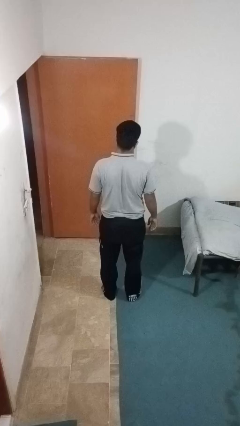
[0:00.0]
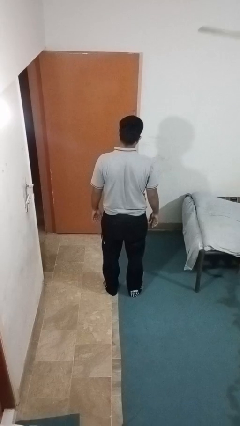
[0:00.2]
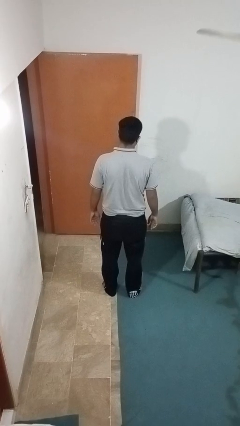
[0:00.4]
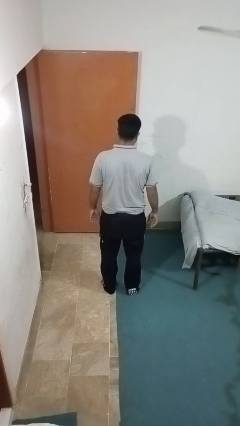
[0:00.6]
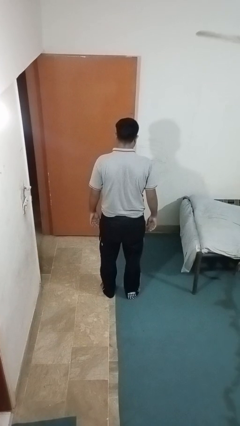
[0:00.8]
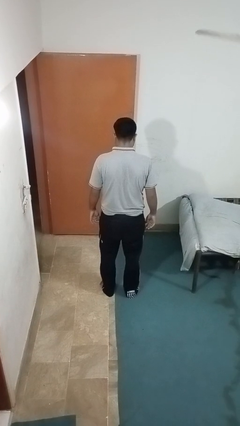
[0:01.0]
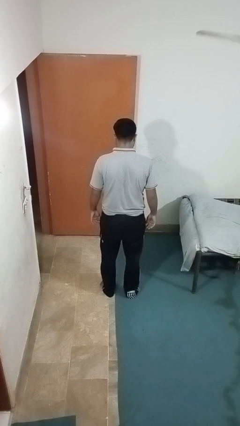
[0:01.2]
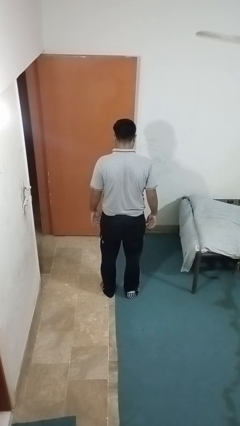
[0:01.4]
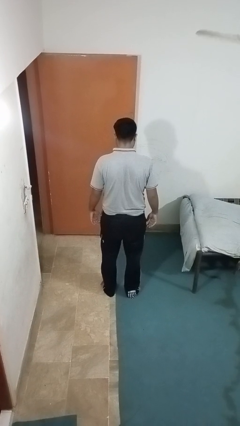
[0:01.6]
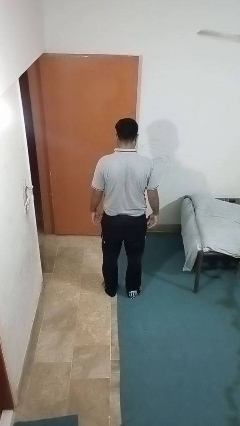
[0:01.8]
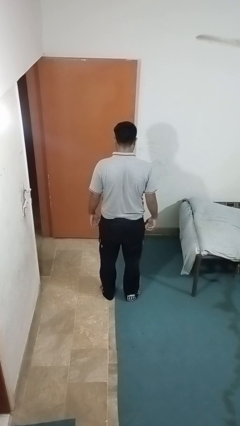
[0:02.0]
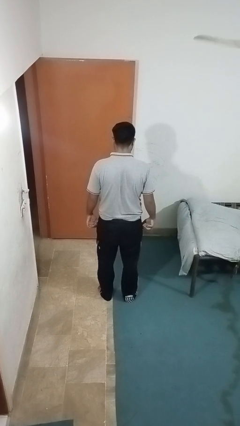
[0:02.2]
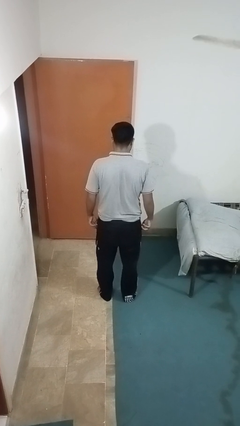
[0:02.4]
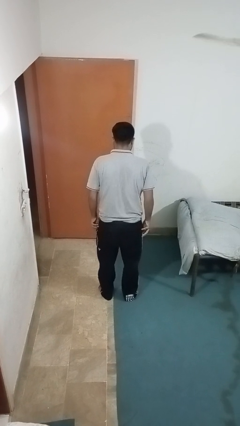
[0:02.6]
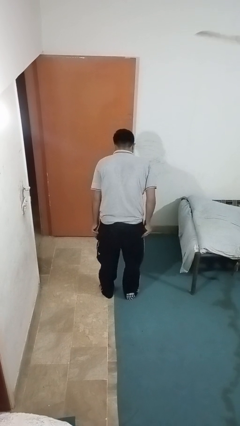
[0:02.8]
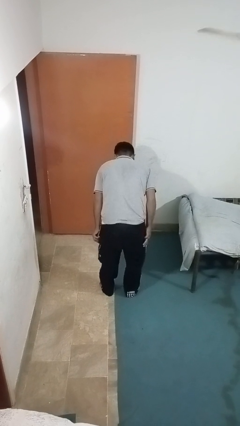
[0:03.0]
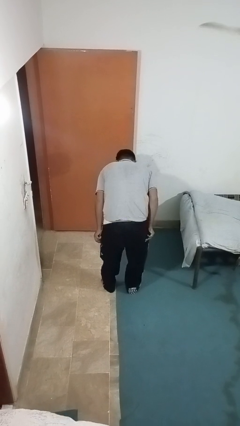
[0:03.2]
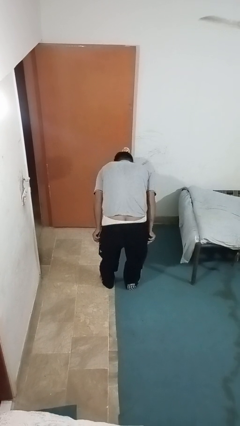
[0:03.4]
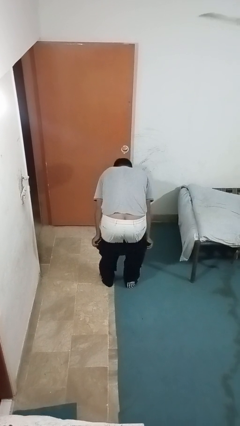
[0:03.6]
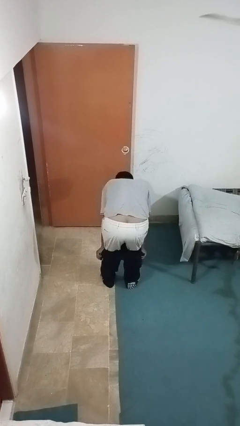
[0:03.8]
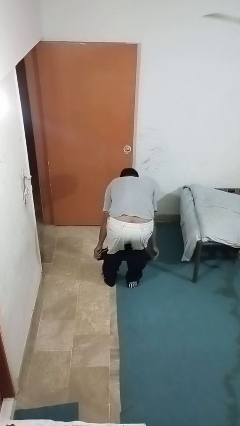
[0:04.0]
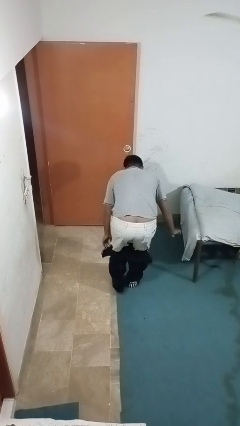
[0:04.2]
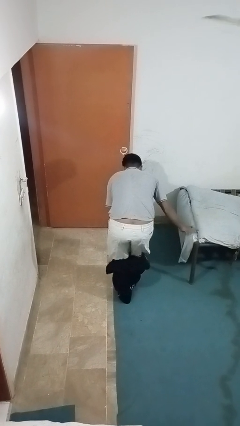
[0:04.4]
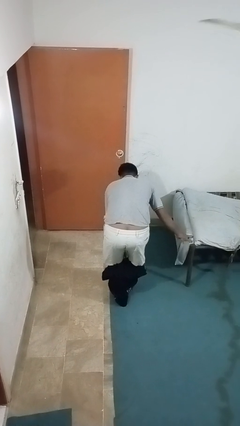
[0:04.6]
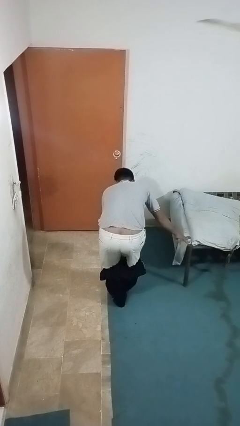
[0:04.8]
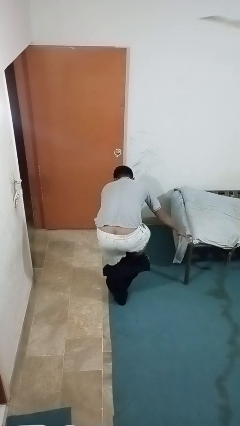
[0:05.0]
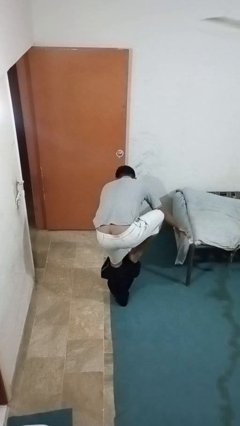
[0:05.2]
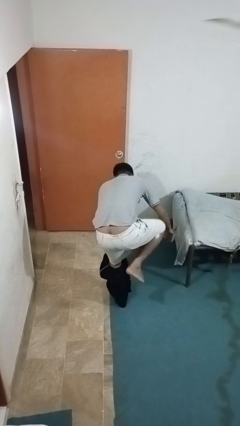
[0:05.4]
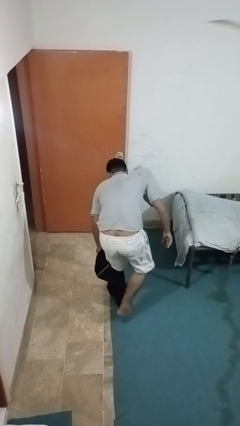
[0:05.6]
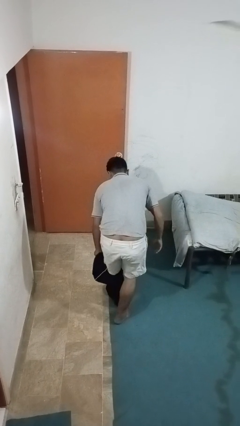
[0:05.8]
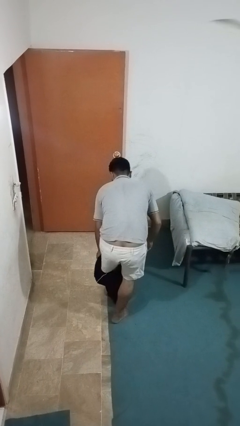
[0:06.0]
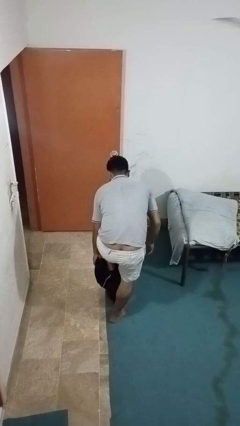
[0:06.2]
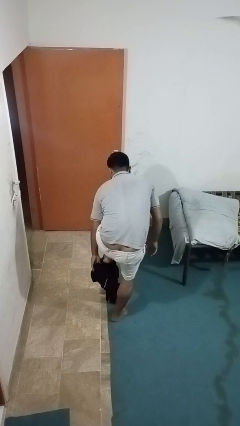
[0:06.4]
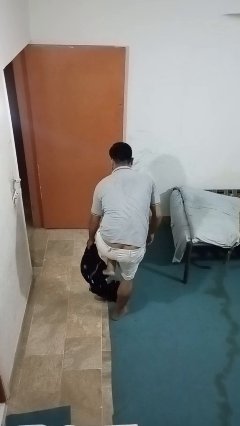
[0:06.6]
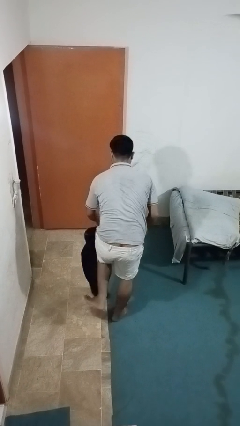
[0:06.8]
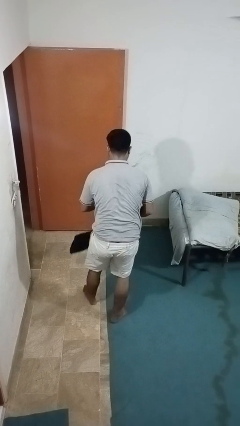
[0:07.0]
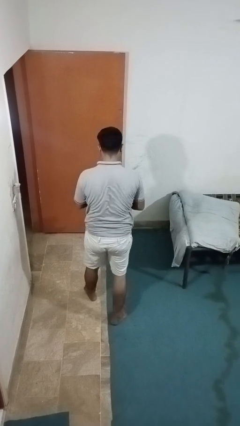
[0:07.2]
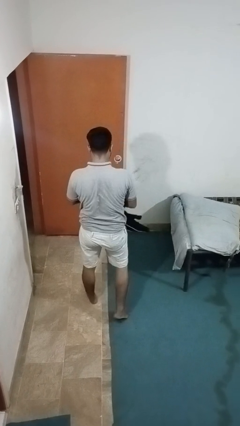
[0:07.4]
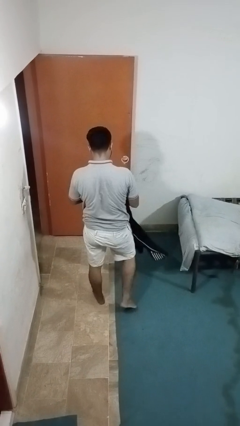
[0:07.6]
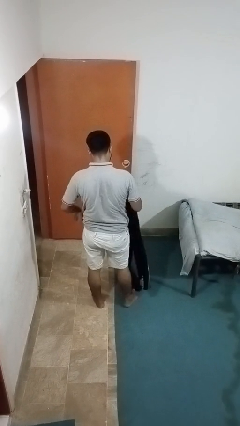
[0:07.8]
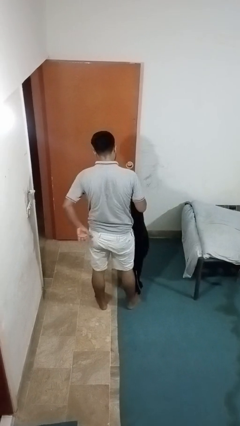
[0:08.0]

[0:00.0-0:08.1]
person takes off pants

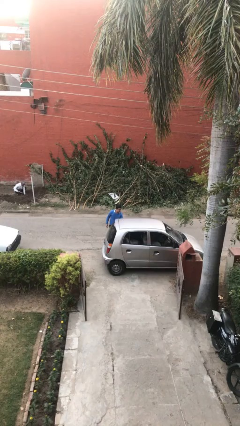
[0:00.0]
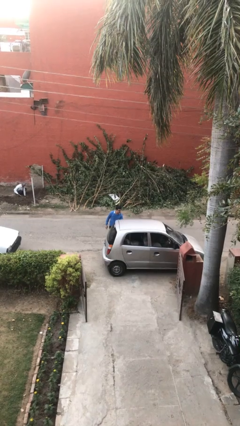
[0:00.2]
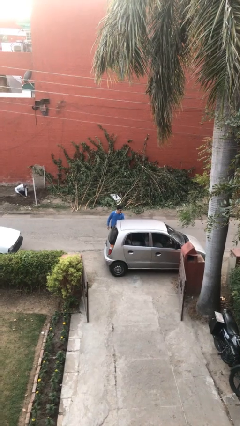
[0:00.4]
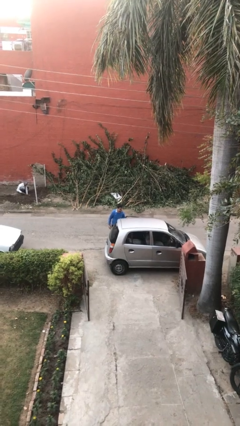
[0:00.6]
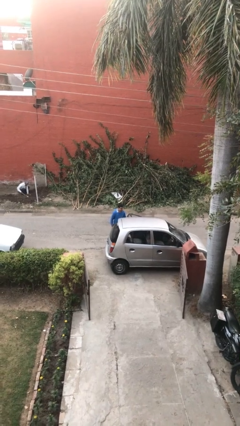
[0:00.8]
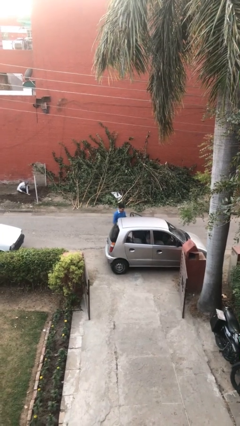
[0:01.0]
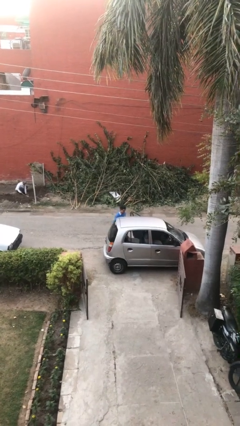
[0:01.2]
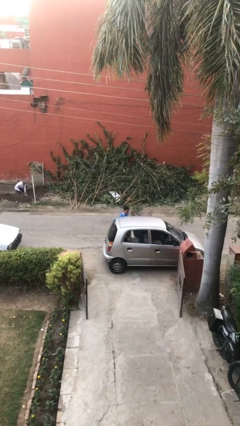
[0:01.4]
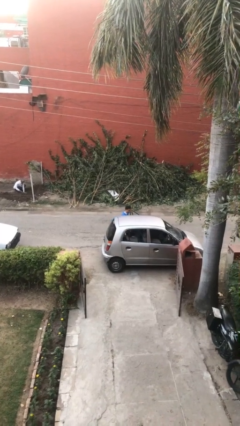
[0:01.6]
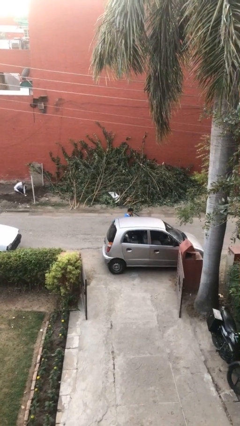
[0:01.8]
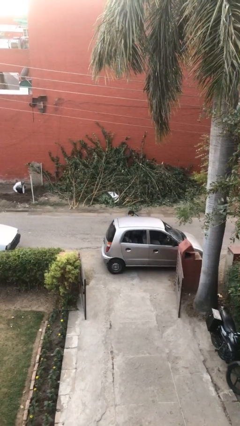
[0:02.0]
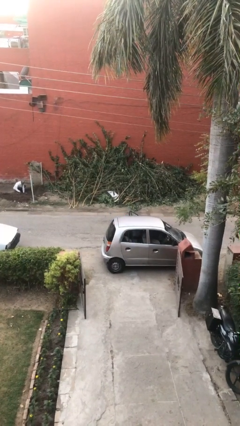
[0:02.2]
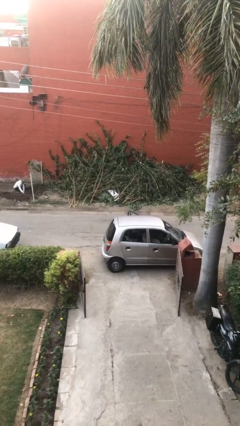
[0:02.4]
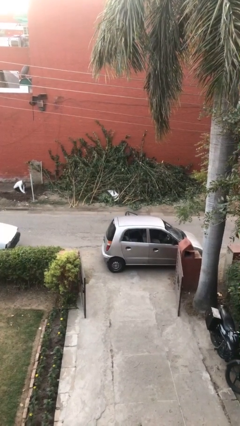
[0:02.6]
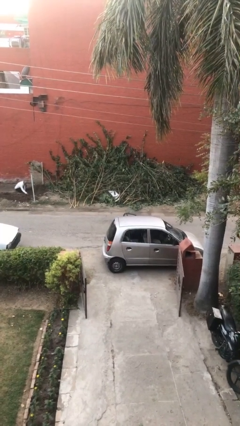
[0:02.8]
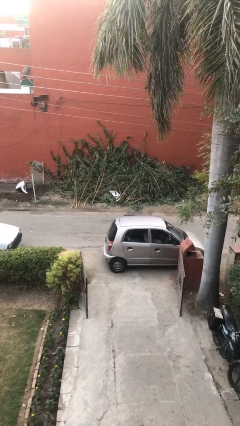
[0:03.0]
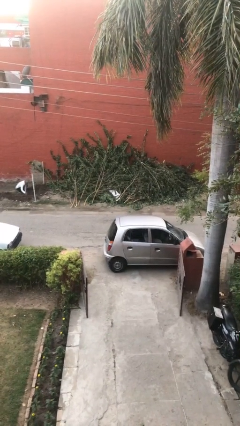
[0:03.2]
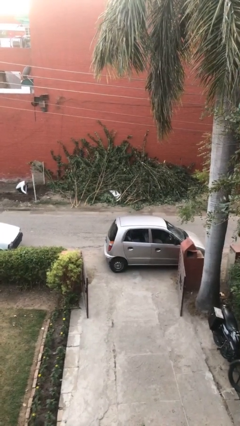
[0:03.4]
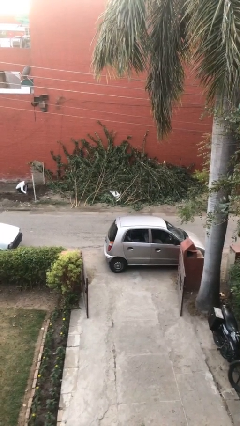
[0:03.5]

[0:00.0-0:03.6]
person enters car

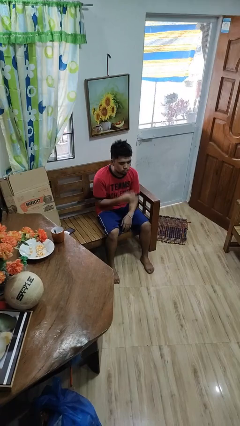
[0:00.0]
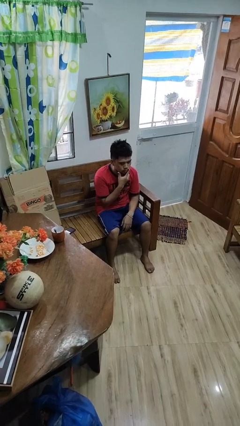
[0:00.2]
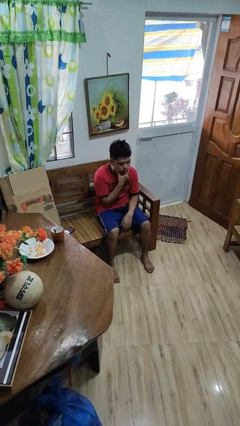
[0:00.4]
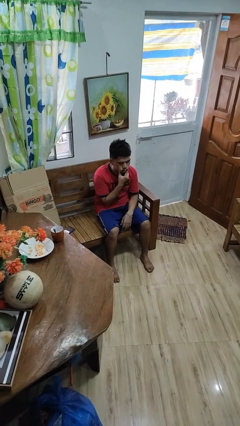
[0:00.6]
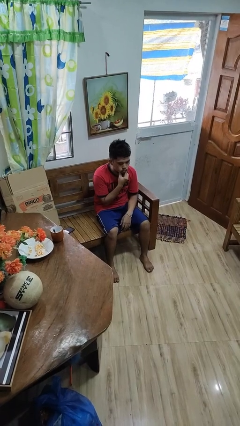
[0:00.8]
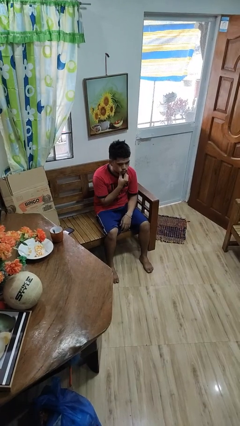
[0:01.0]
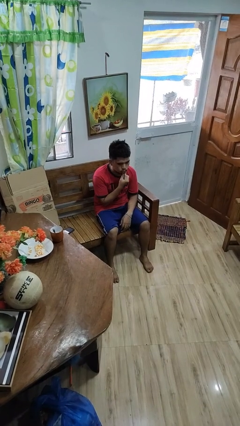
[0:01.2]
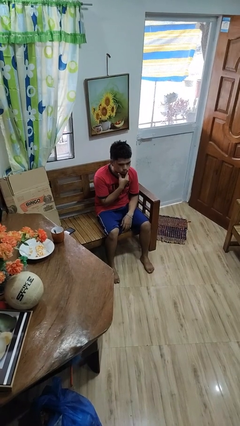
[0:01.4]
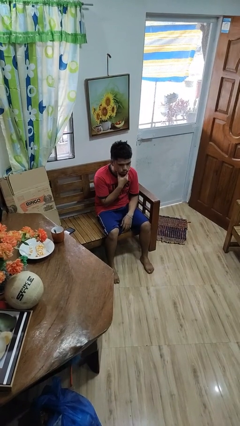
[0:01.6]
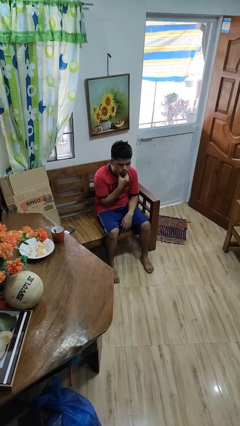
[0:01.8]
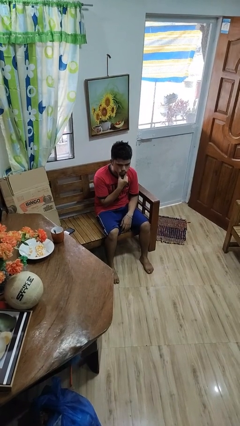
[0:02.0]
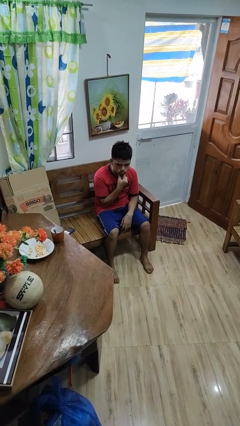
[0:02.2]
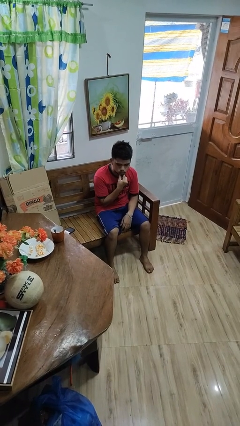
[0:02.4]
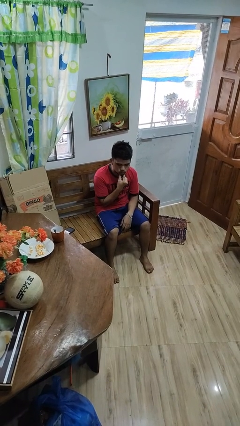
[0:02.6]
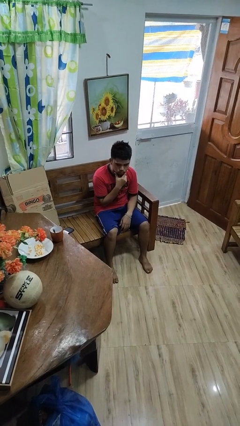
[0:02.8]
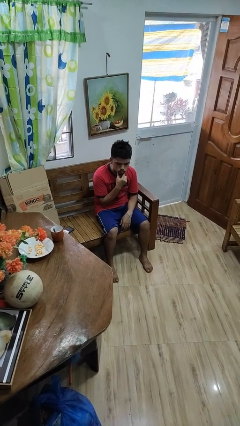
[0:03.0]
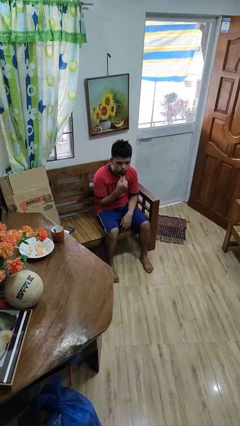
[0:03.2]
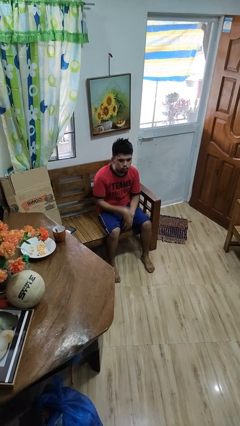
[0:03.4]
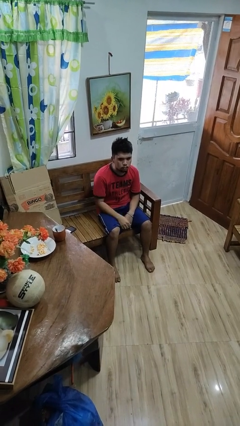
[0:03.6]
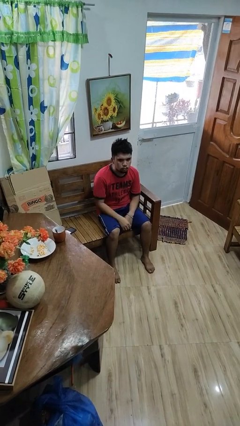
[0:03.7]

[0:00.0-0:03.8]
person strokes chin

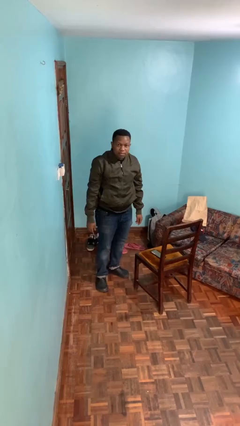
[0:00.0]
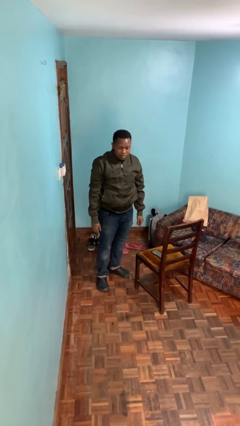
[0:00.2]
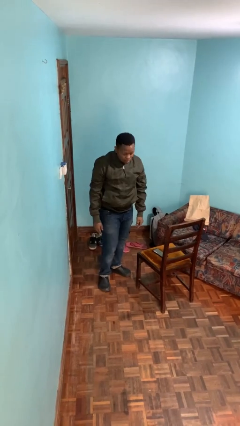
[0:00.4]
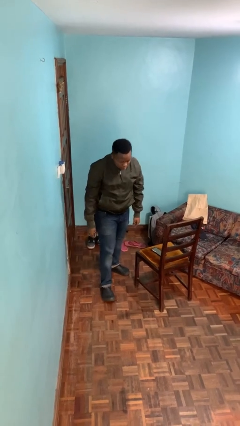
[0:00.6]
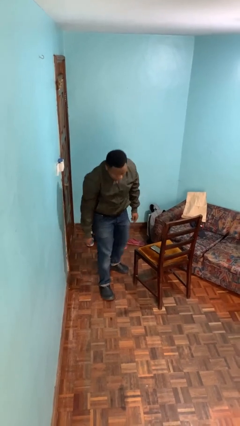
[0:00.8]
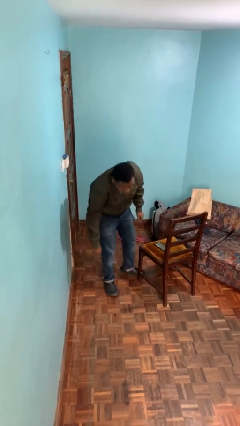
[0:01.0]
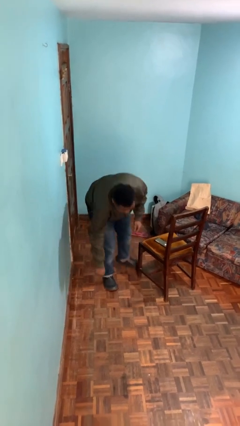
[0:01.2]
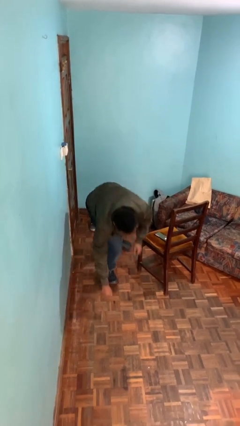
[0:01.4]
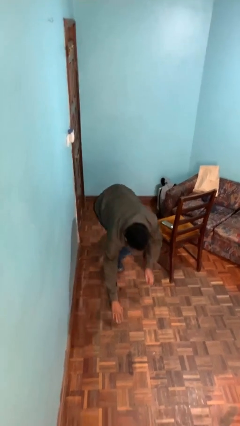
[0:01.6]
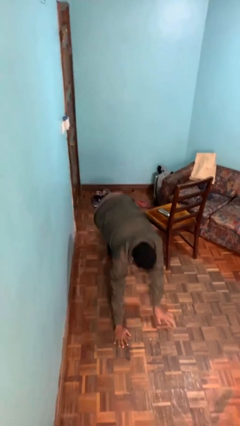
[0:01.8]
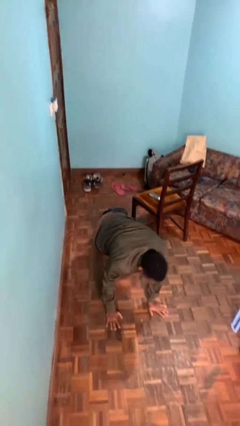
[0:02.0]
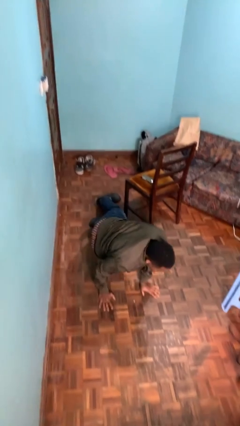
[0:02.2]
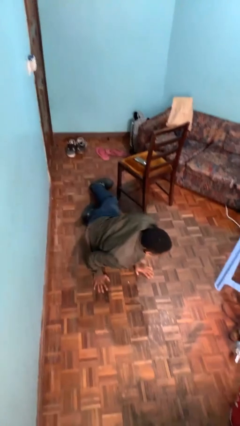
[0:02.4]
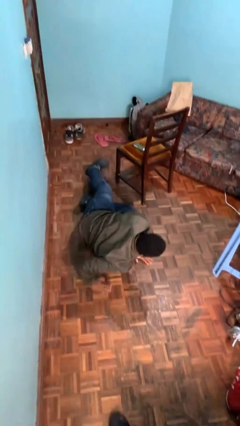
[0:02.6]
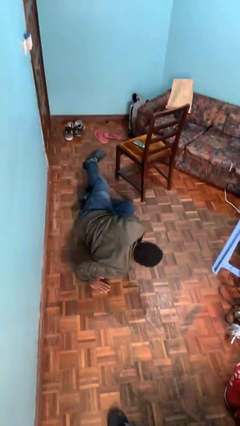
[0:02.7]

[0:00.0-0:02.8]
person trips on object on floor
